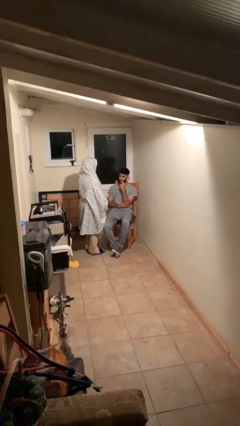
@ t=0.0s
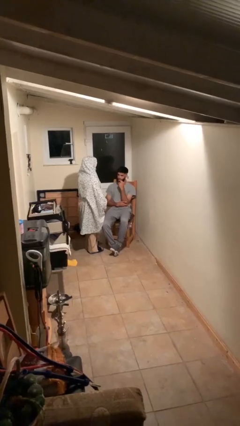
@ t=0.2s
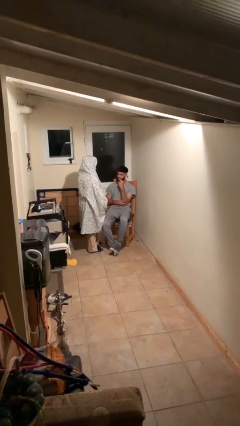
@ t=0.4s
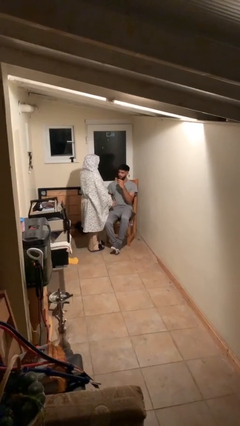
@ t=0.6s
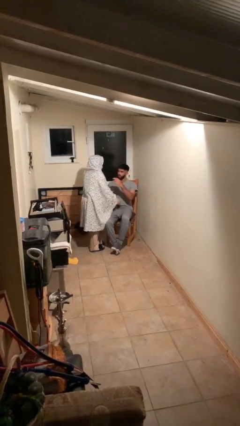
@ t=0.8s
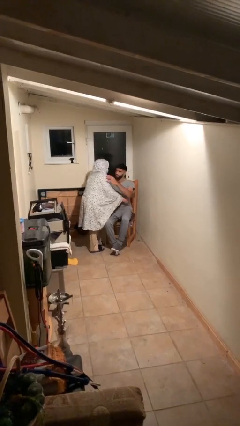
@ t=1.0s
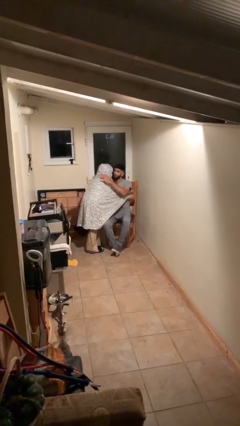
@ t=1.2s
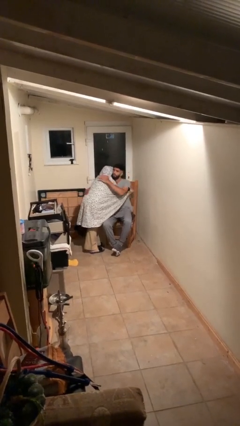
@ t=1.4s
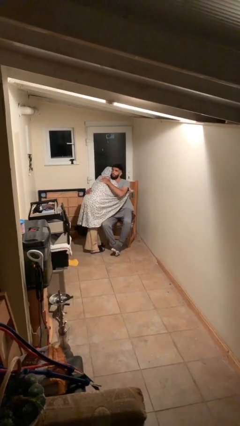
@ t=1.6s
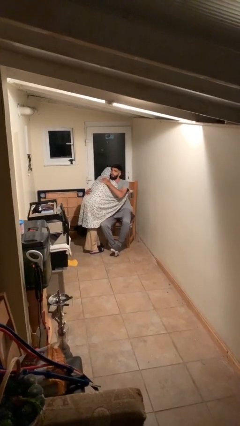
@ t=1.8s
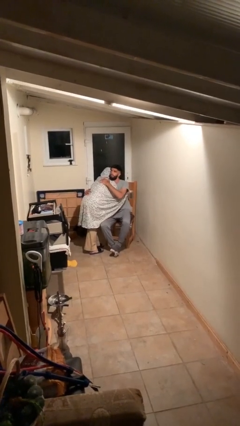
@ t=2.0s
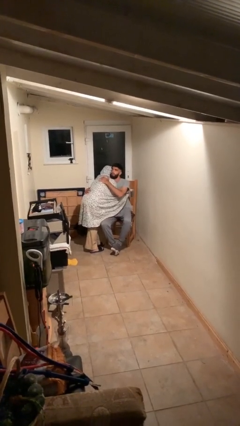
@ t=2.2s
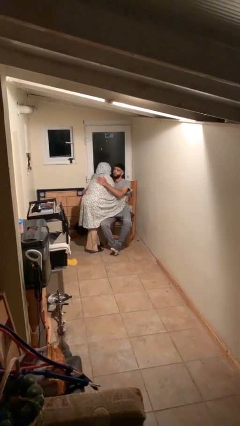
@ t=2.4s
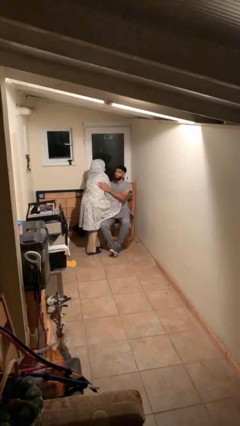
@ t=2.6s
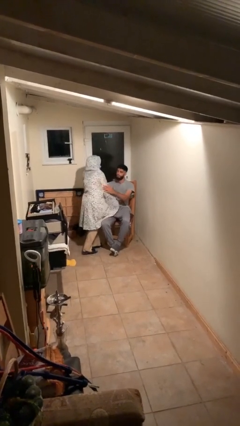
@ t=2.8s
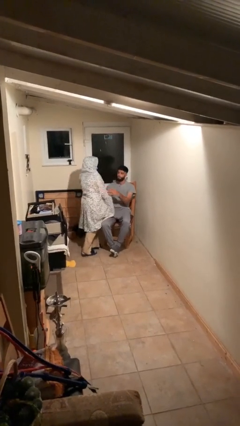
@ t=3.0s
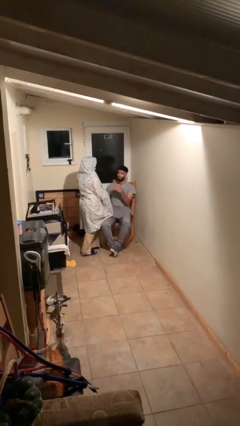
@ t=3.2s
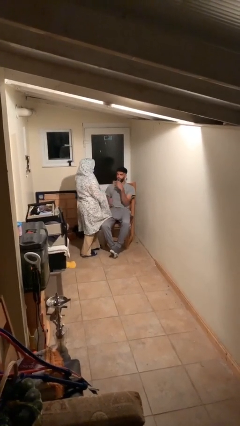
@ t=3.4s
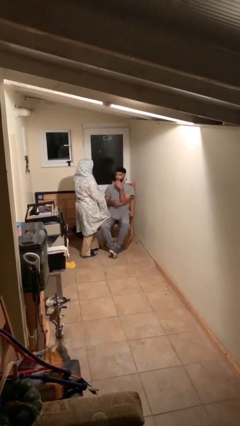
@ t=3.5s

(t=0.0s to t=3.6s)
person embraces person

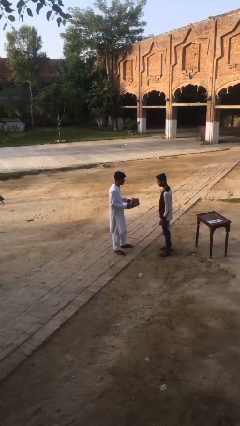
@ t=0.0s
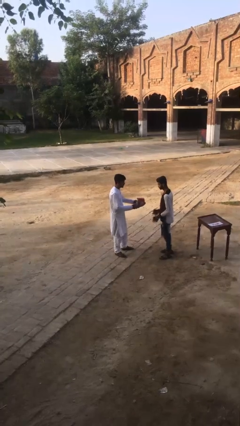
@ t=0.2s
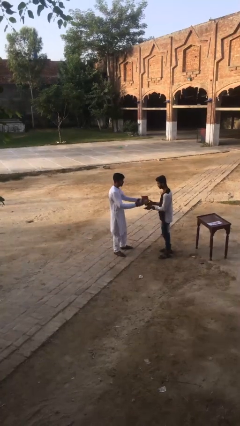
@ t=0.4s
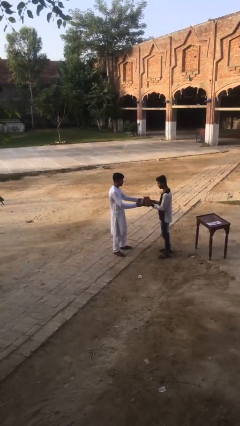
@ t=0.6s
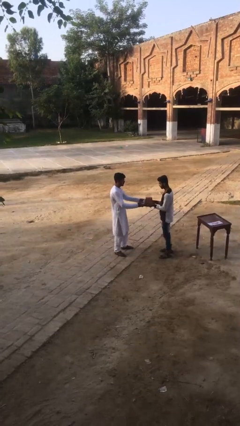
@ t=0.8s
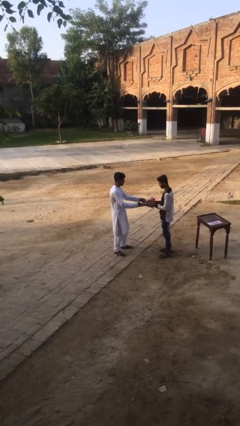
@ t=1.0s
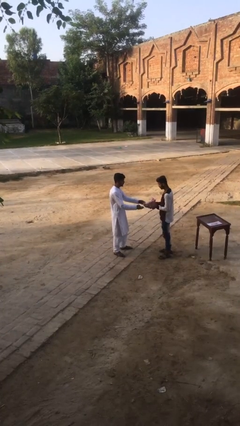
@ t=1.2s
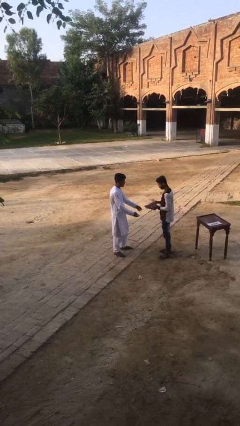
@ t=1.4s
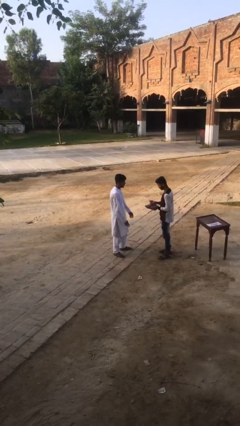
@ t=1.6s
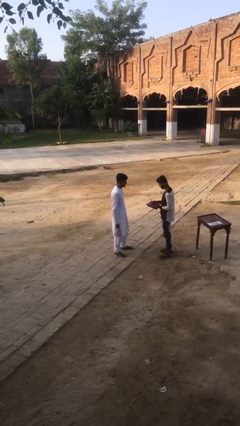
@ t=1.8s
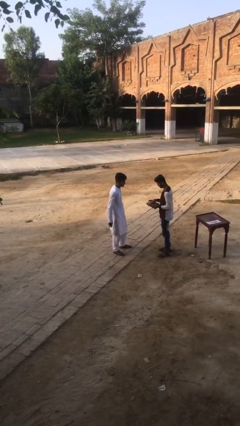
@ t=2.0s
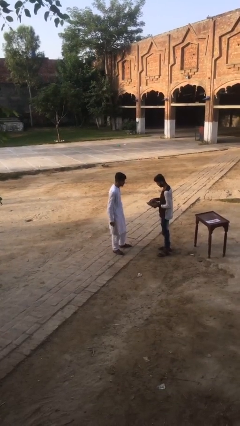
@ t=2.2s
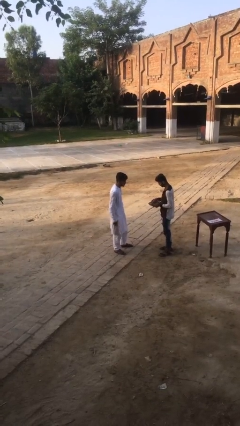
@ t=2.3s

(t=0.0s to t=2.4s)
person transfers object to person

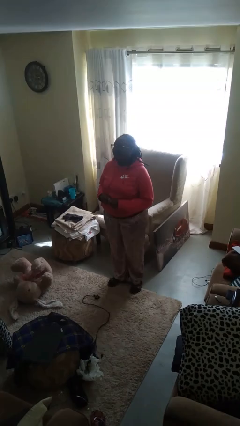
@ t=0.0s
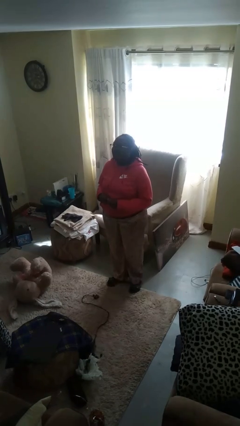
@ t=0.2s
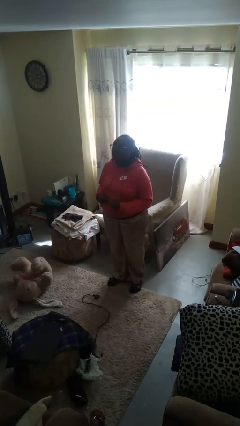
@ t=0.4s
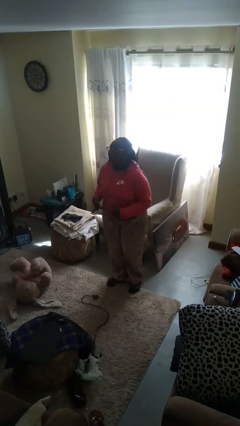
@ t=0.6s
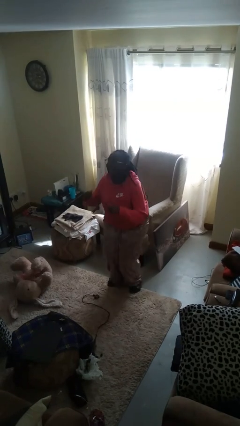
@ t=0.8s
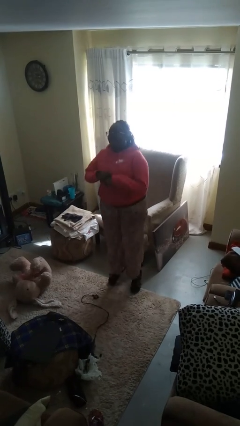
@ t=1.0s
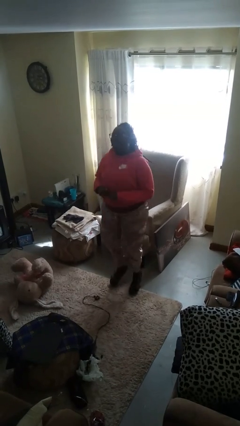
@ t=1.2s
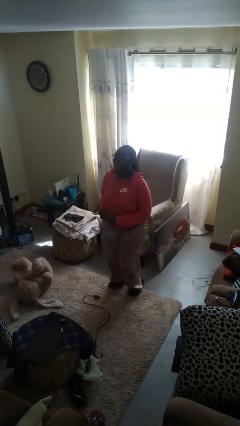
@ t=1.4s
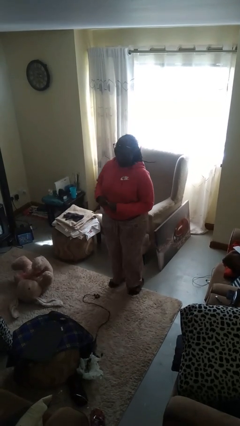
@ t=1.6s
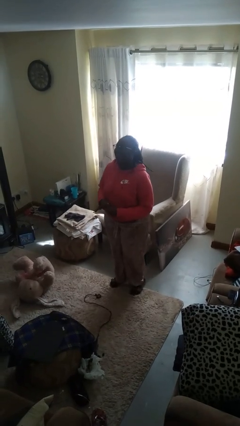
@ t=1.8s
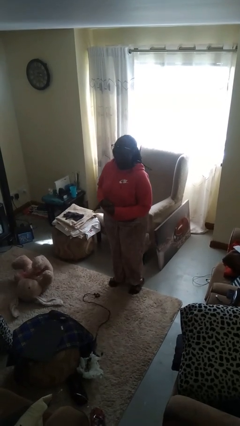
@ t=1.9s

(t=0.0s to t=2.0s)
person jumps

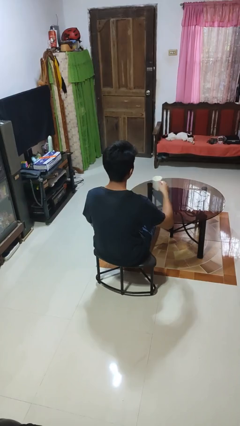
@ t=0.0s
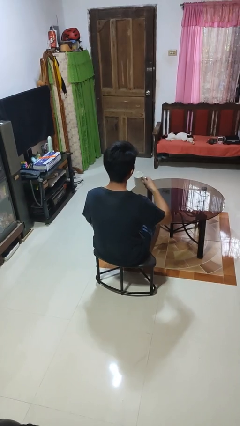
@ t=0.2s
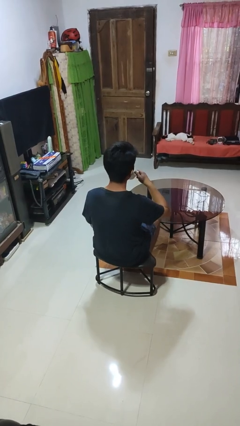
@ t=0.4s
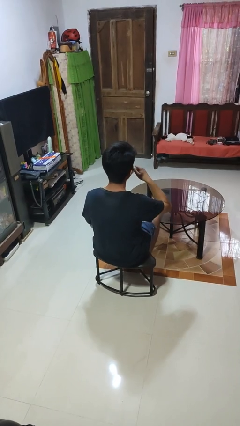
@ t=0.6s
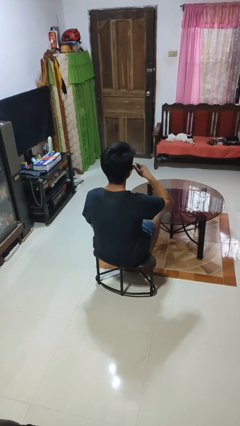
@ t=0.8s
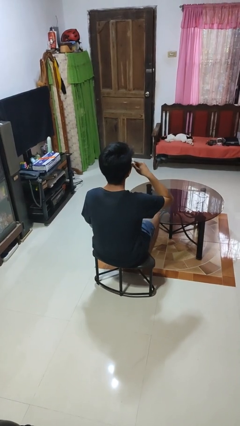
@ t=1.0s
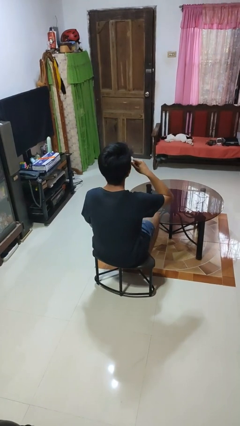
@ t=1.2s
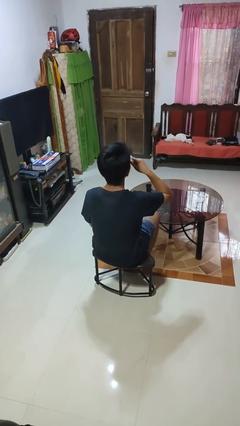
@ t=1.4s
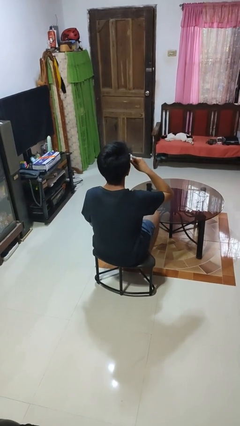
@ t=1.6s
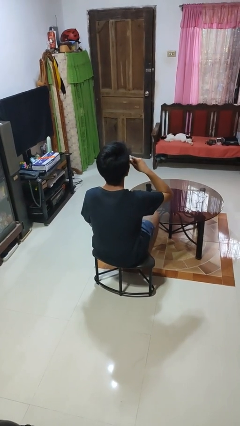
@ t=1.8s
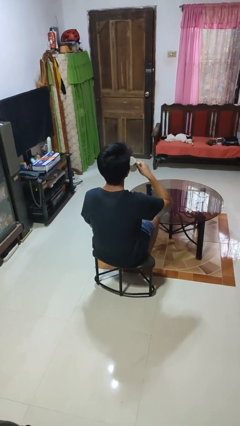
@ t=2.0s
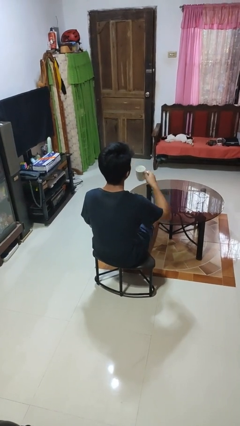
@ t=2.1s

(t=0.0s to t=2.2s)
person drinks from mug

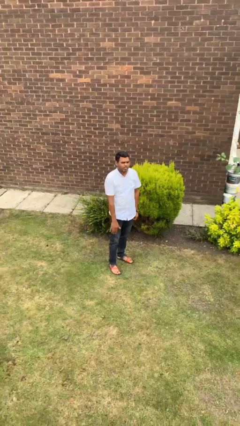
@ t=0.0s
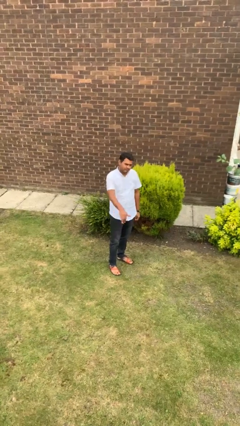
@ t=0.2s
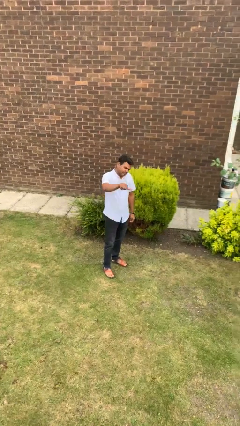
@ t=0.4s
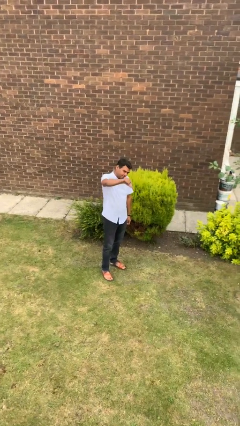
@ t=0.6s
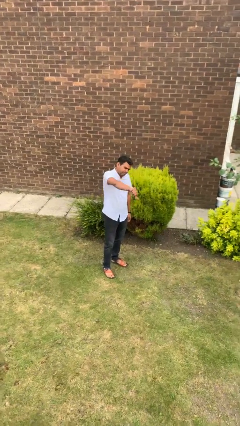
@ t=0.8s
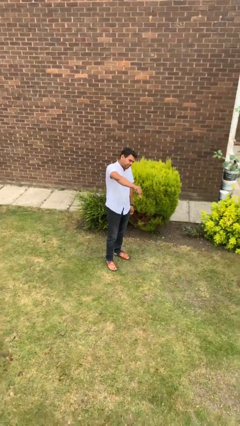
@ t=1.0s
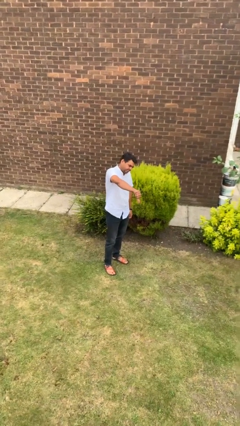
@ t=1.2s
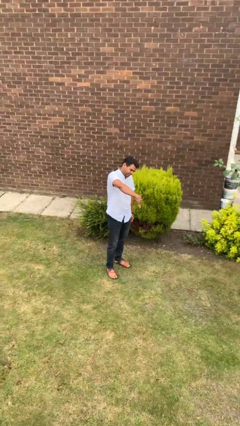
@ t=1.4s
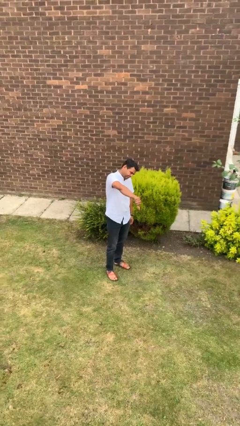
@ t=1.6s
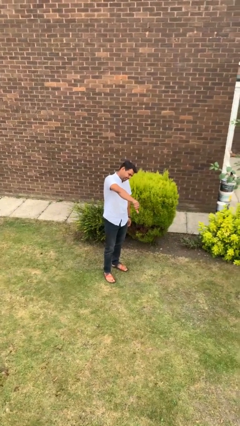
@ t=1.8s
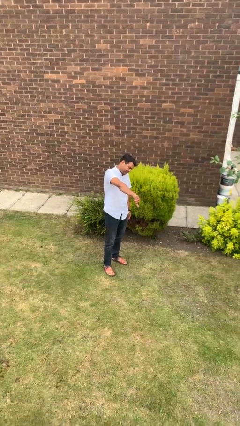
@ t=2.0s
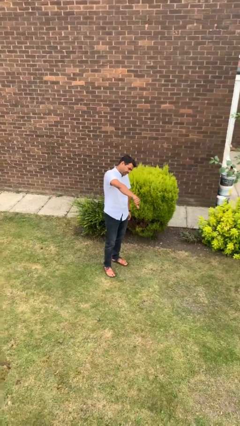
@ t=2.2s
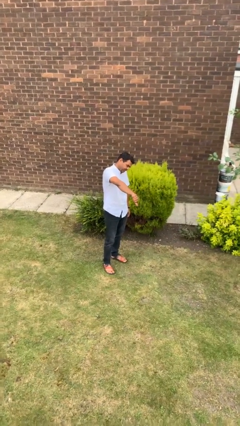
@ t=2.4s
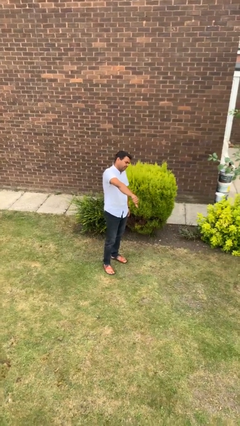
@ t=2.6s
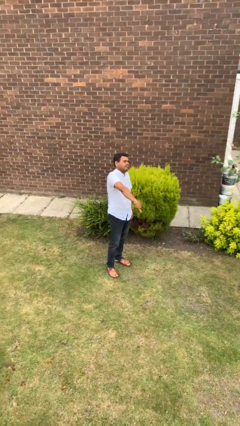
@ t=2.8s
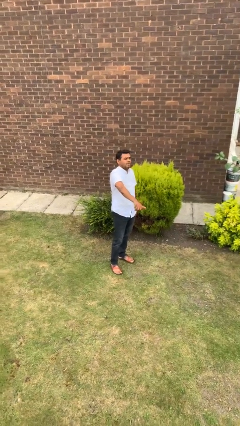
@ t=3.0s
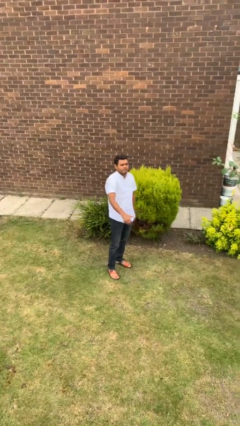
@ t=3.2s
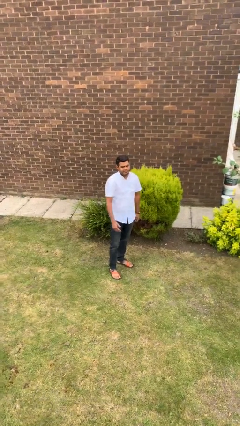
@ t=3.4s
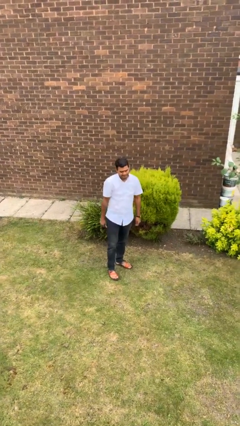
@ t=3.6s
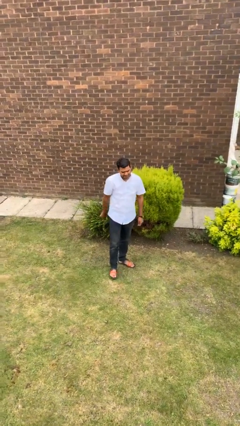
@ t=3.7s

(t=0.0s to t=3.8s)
person gestures thumbs down

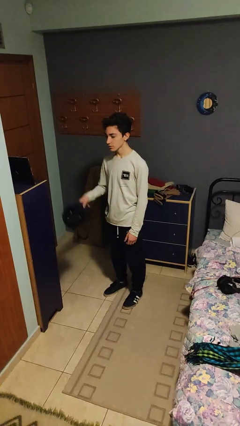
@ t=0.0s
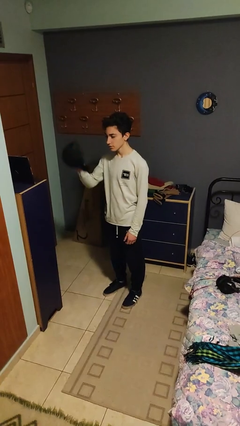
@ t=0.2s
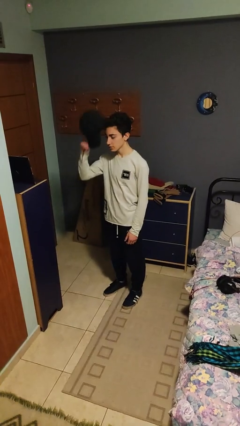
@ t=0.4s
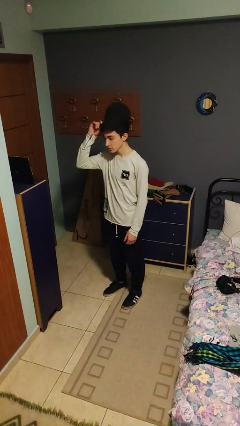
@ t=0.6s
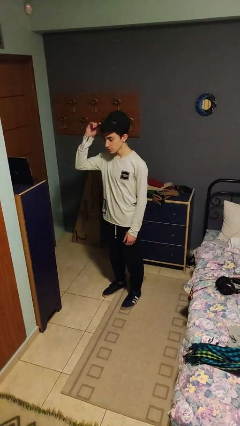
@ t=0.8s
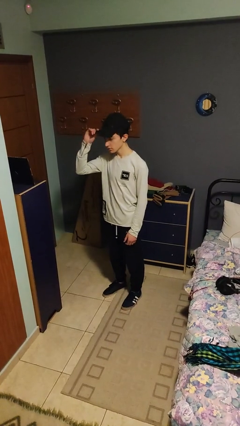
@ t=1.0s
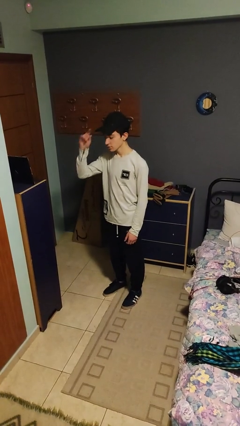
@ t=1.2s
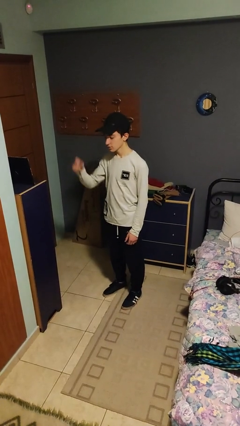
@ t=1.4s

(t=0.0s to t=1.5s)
person puts on hat

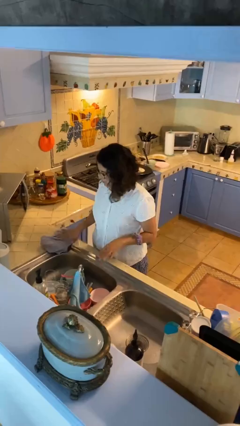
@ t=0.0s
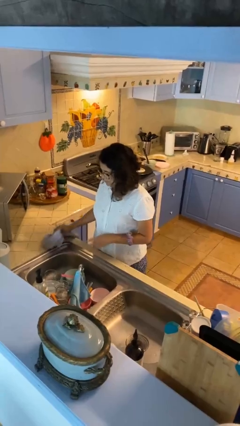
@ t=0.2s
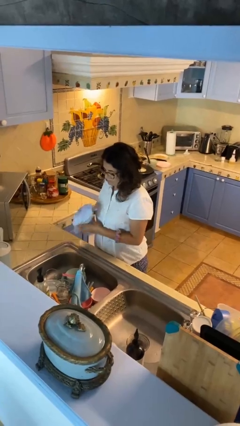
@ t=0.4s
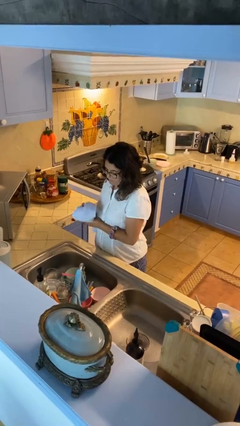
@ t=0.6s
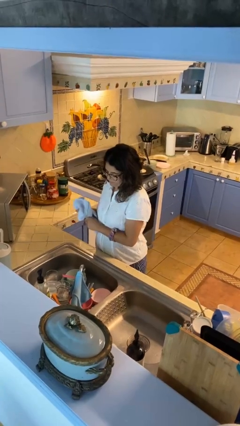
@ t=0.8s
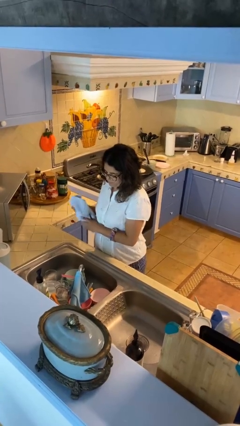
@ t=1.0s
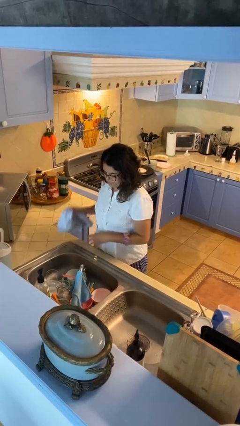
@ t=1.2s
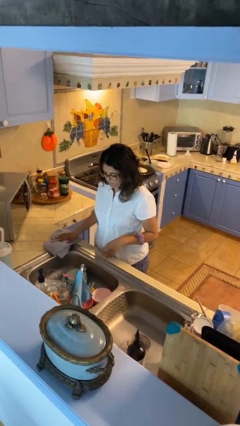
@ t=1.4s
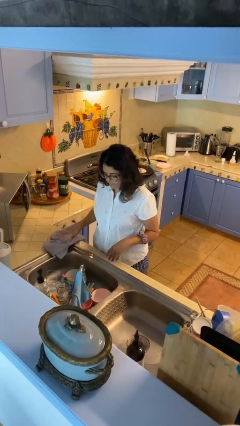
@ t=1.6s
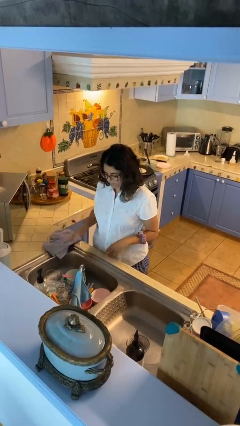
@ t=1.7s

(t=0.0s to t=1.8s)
person dries hands with towel

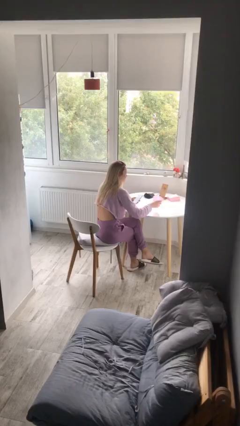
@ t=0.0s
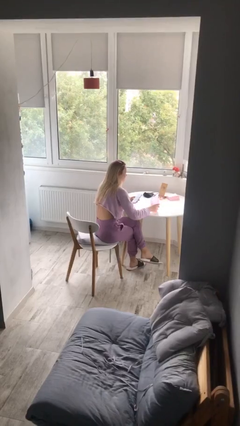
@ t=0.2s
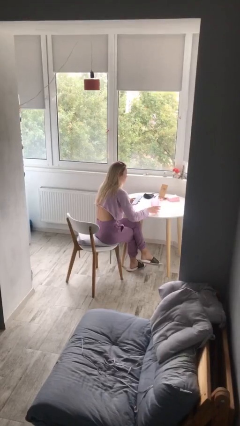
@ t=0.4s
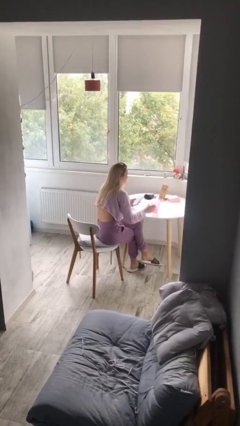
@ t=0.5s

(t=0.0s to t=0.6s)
person sets upright glass
